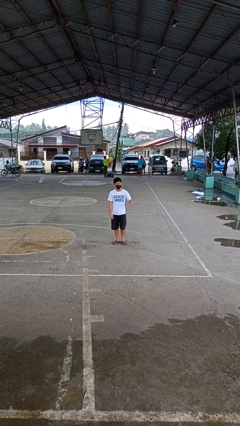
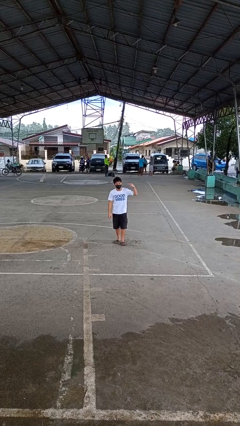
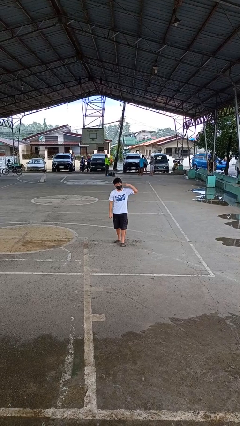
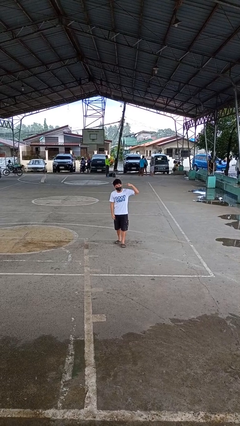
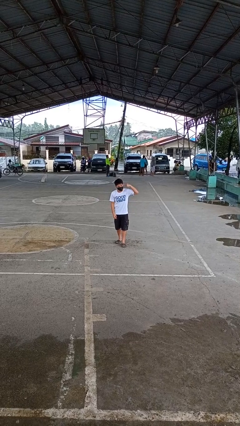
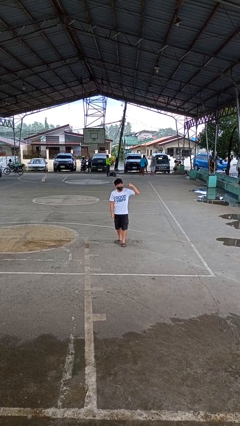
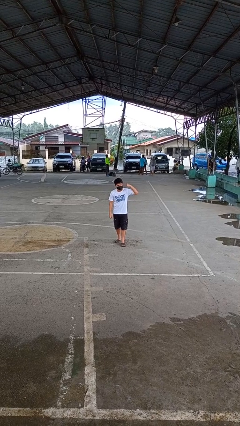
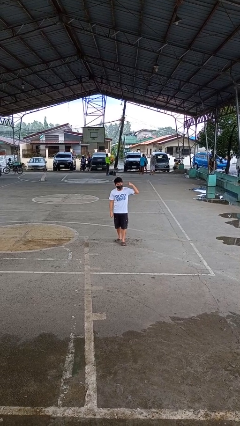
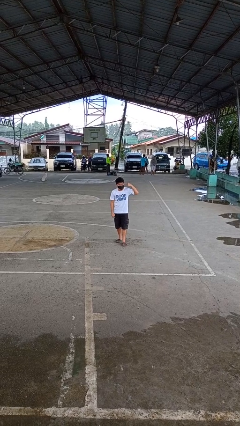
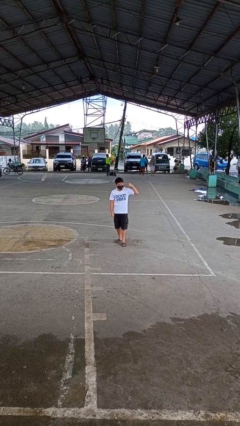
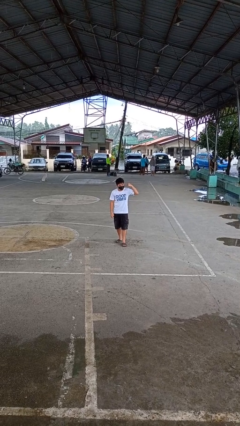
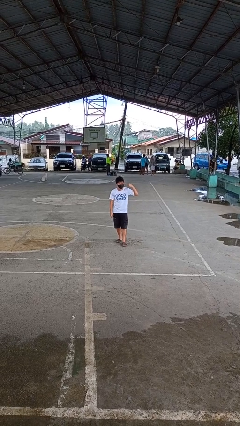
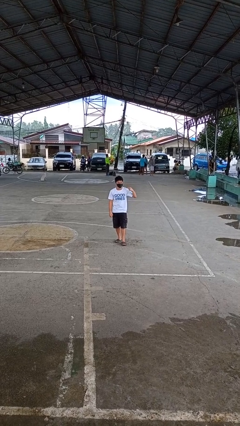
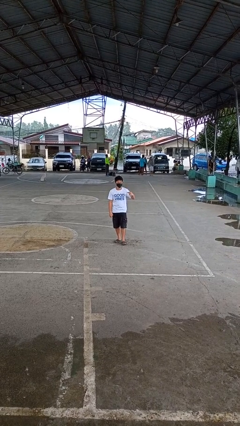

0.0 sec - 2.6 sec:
person gestures listen closely

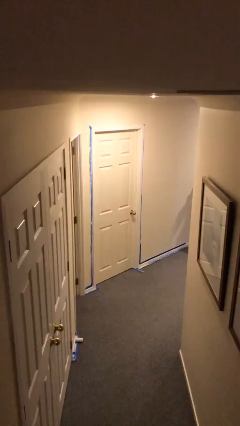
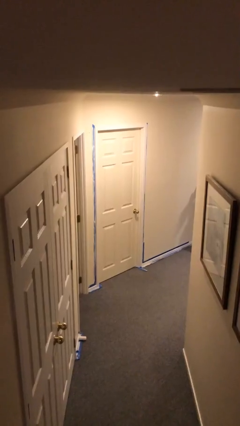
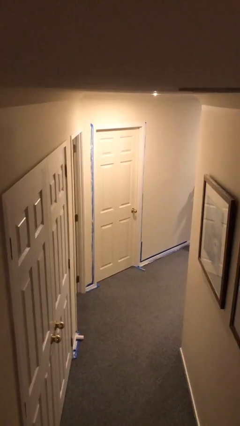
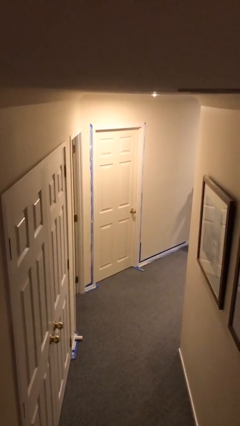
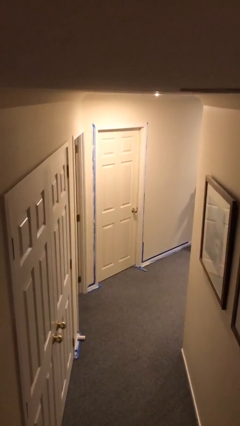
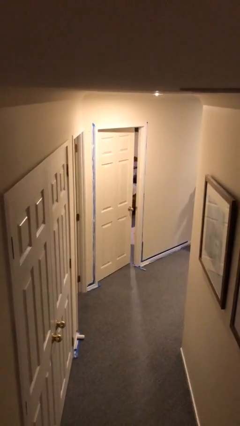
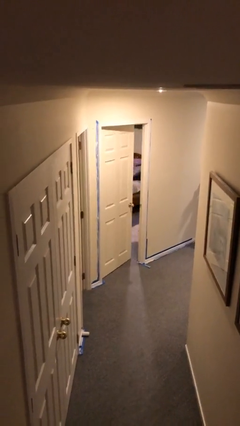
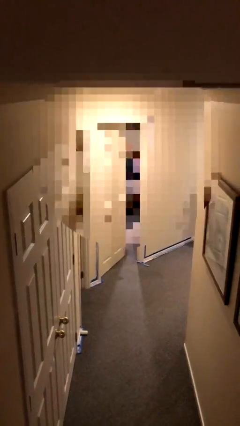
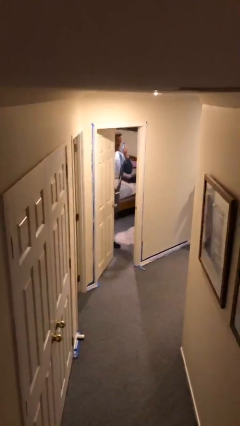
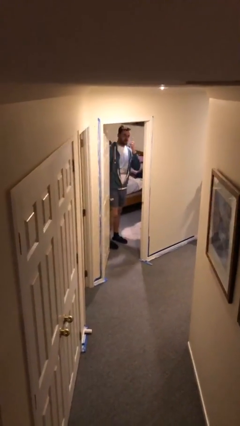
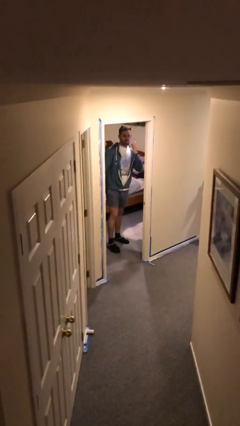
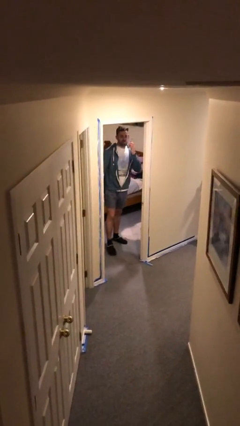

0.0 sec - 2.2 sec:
person opens facility door

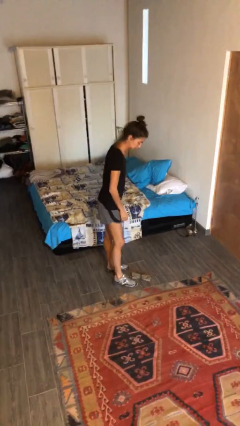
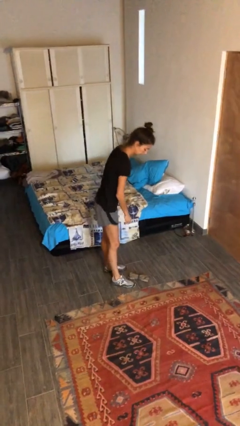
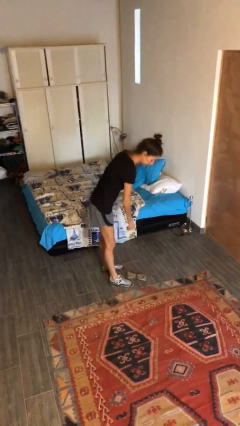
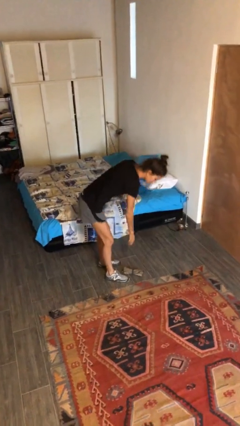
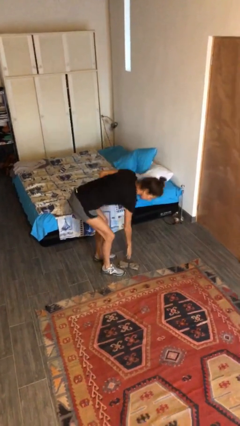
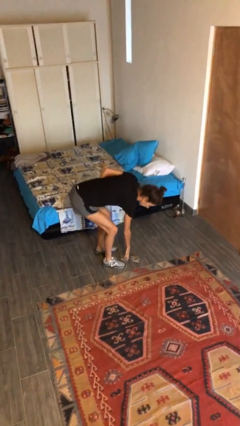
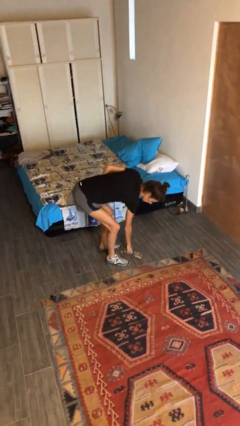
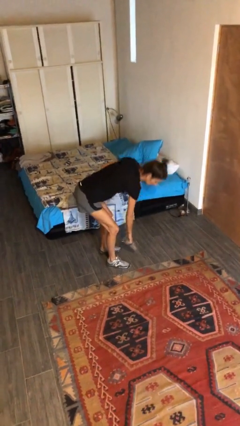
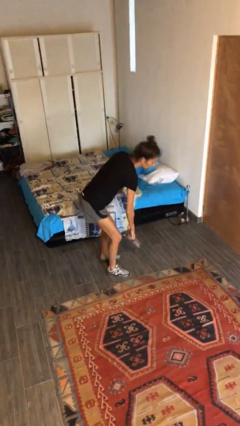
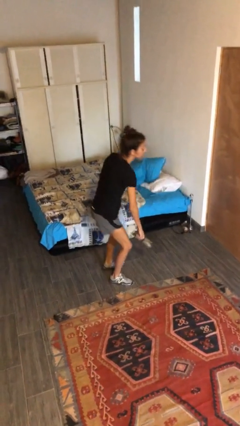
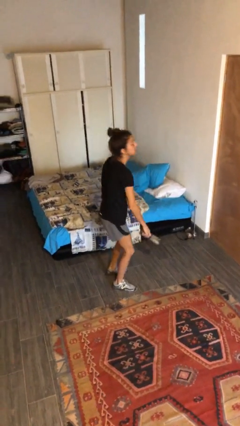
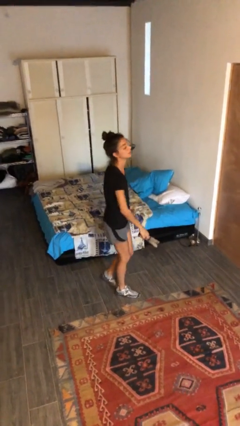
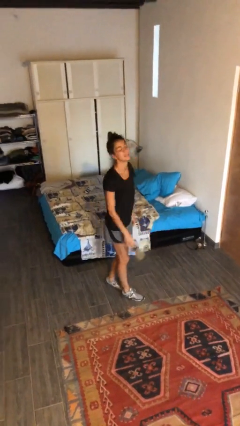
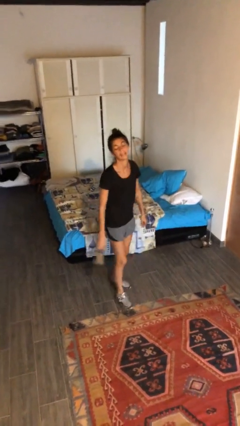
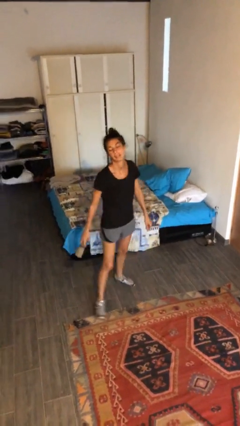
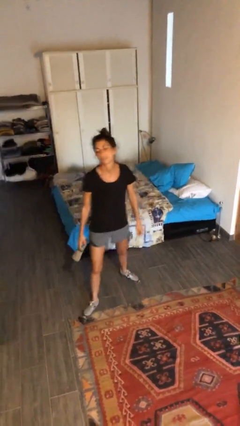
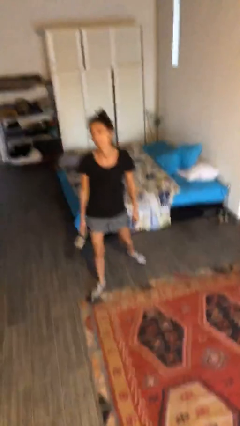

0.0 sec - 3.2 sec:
person picks up object from floor

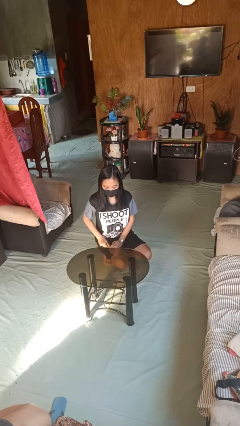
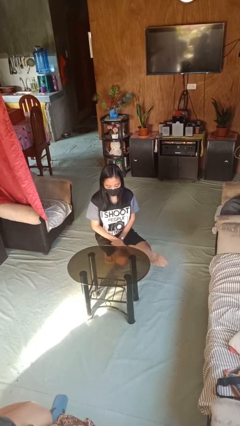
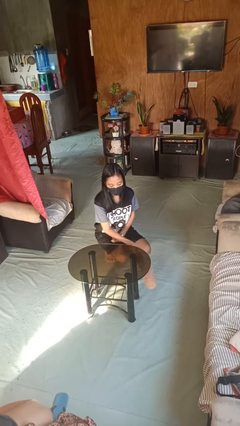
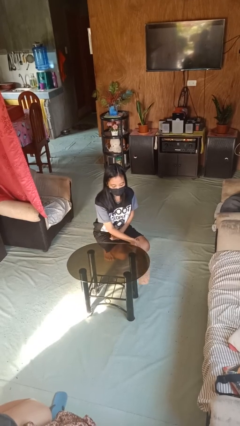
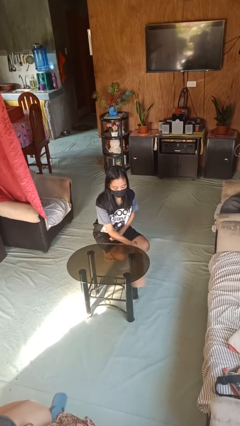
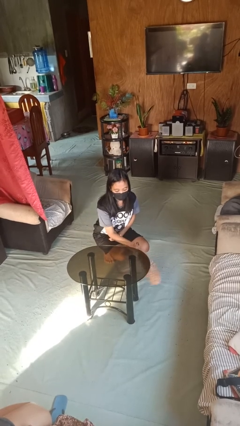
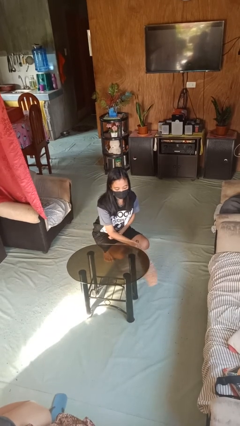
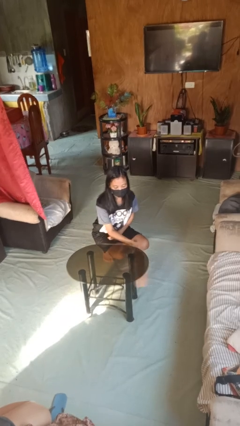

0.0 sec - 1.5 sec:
person dusts furniture

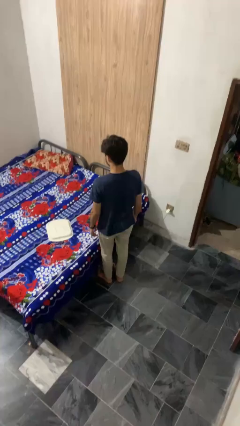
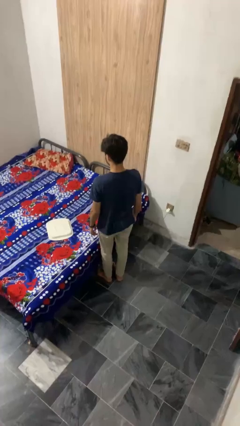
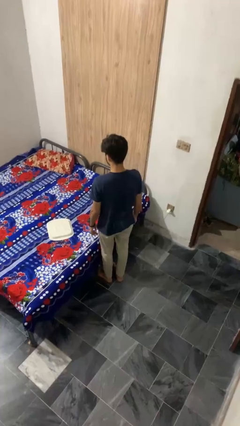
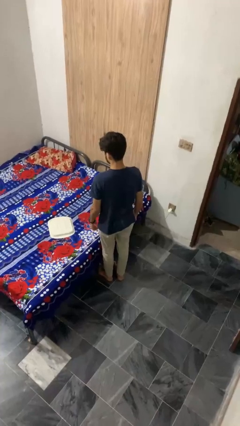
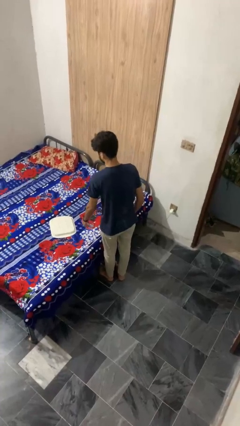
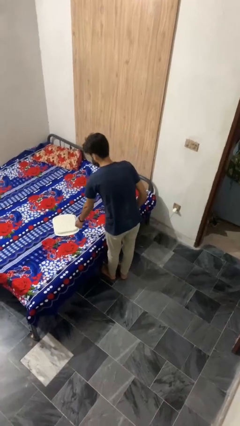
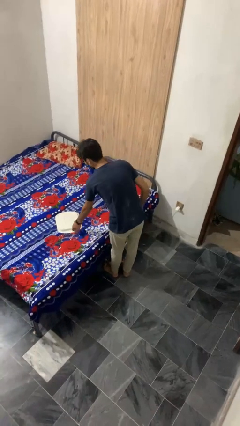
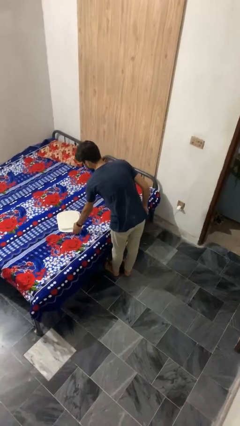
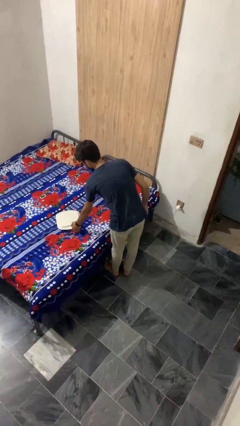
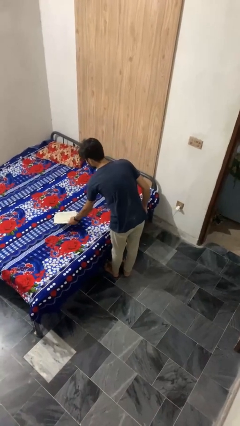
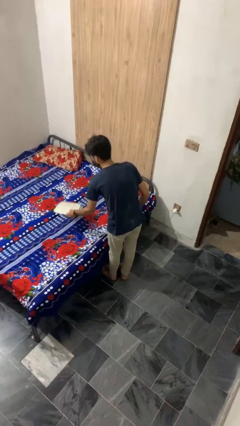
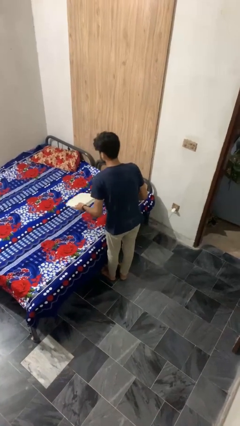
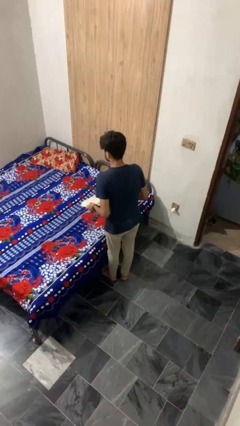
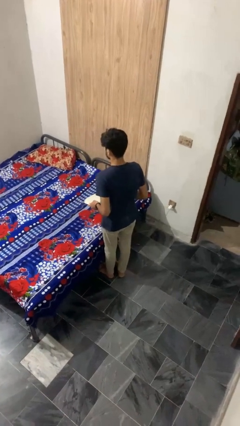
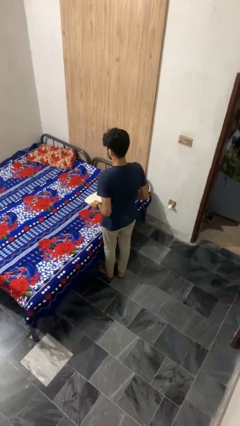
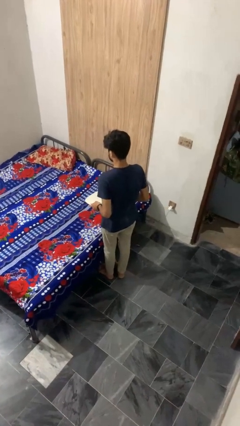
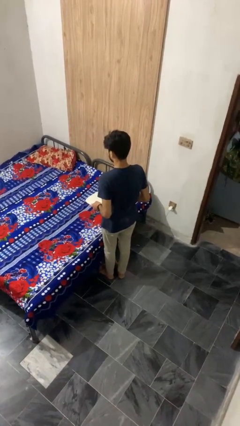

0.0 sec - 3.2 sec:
person picks up object from bed

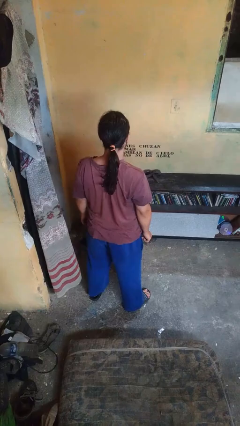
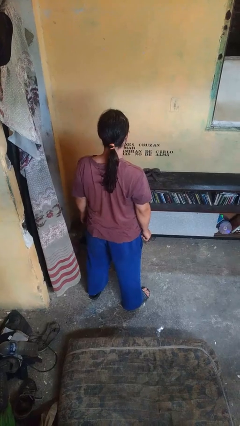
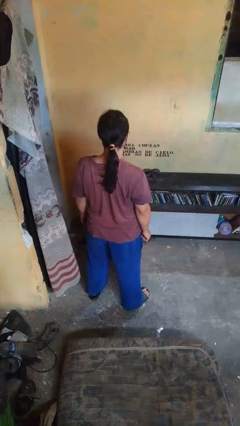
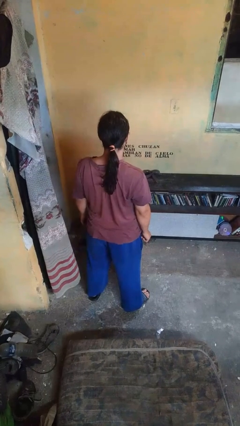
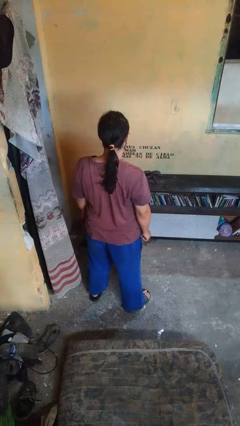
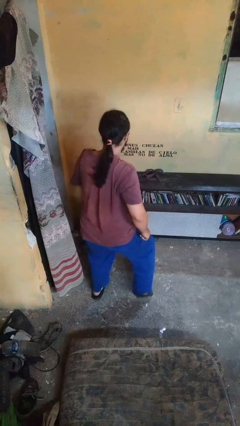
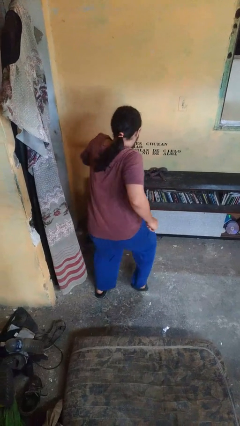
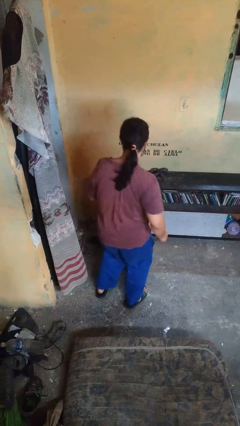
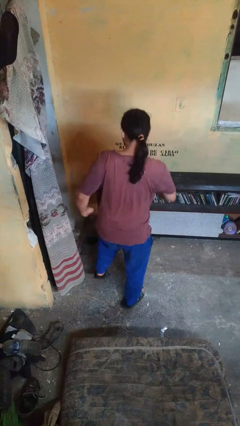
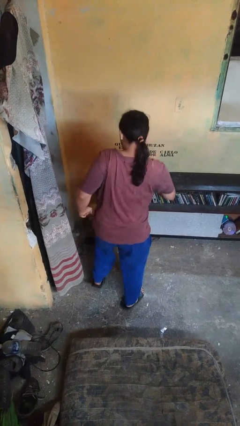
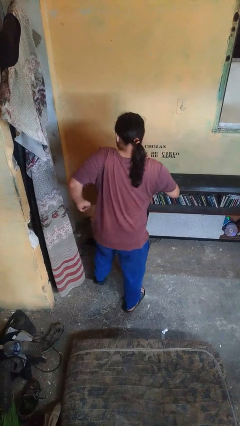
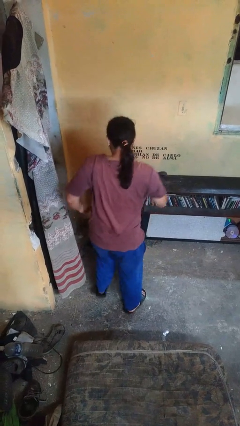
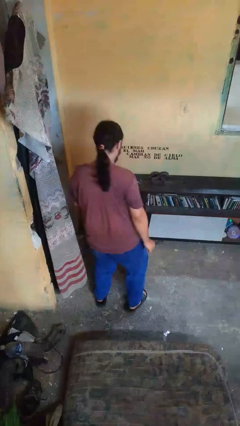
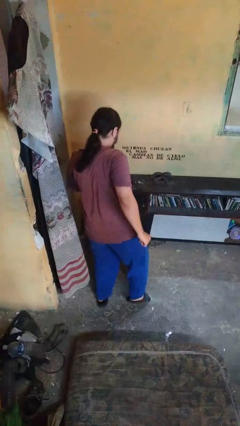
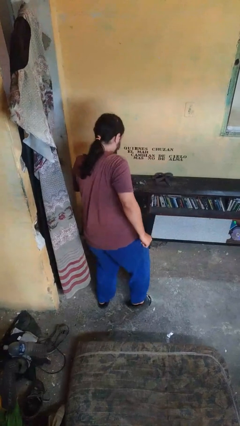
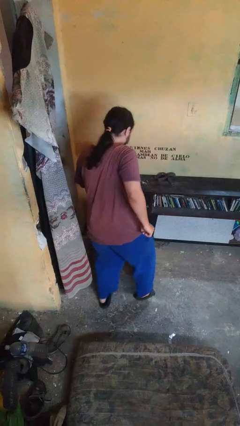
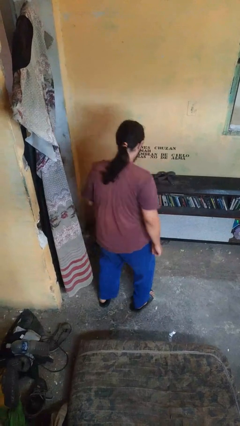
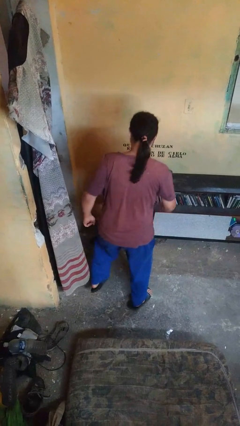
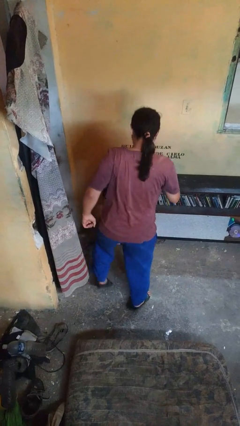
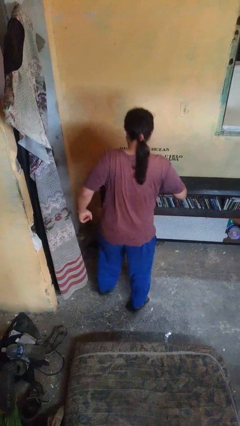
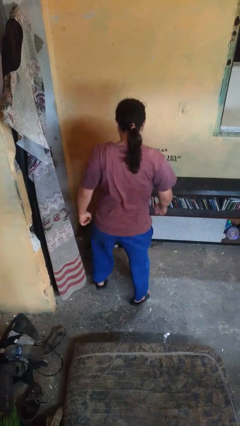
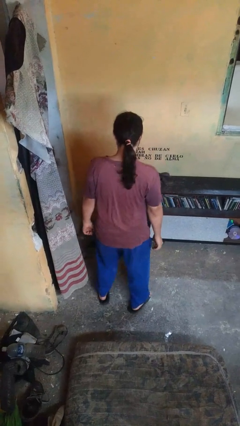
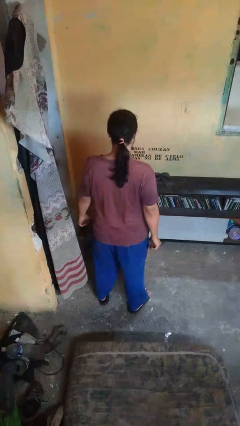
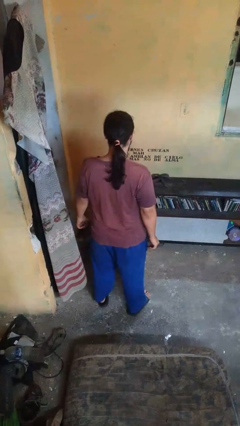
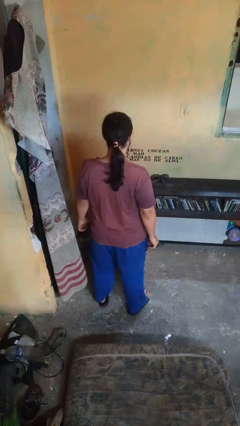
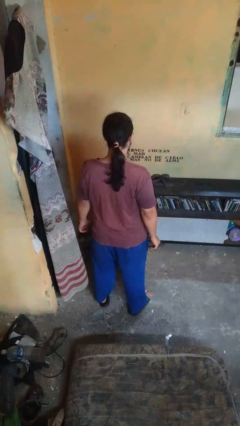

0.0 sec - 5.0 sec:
person dances in place
